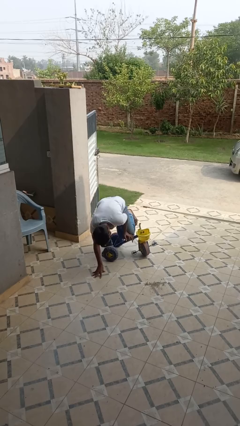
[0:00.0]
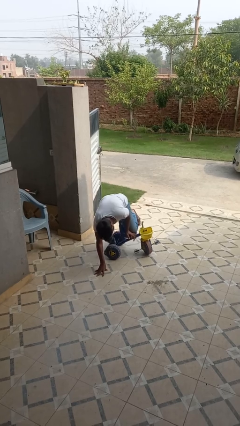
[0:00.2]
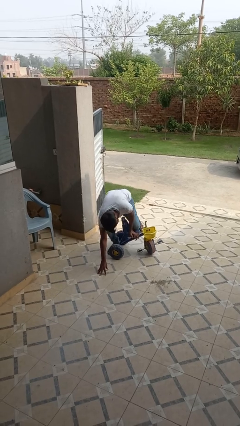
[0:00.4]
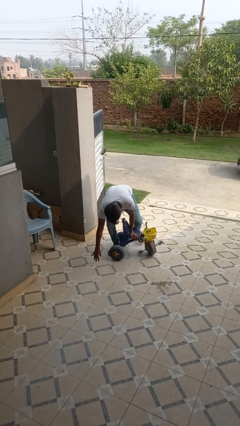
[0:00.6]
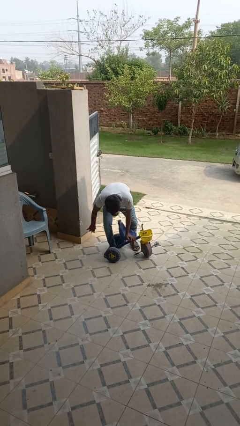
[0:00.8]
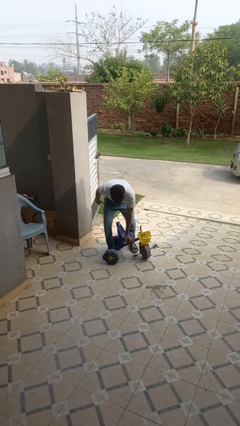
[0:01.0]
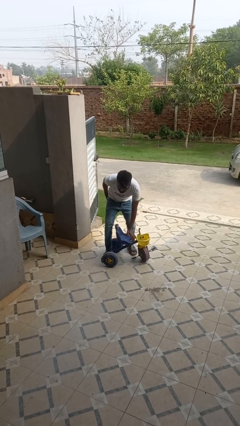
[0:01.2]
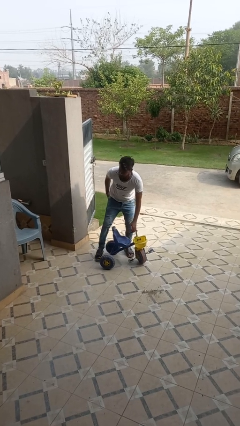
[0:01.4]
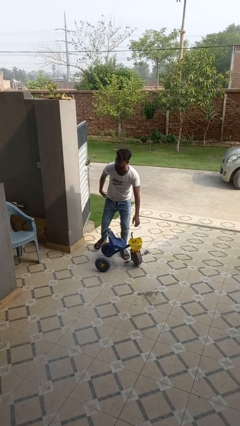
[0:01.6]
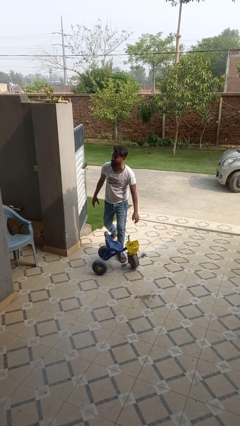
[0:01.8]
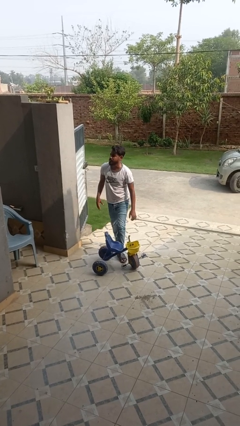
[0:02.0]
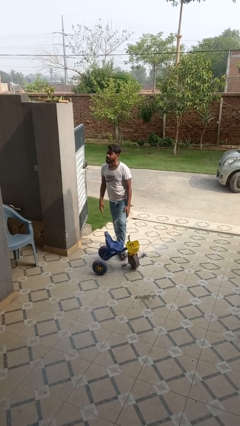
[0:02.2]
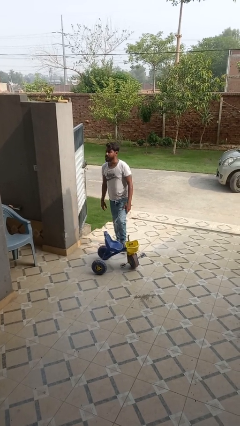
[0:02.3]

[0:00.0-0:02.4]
person stands up from floor

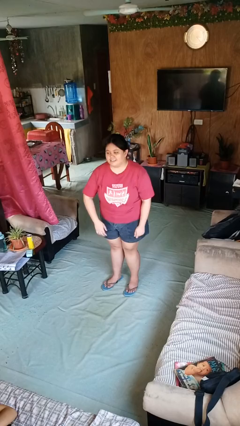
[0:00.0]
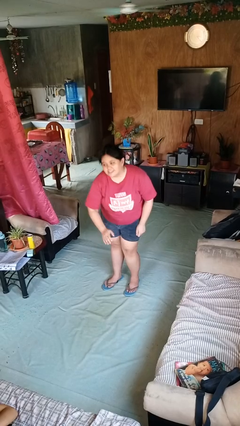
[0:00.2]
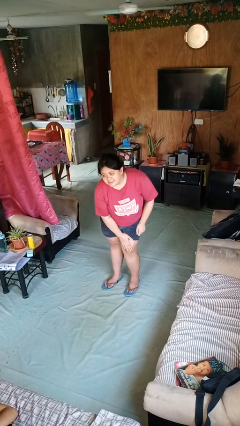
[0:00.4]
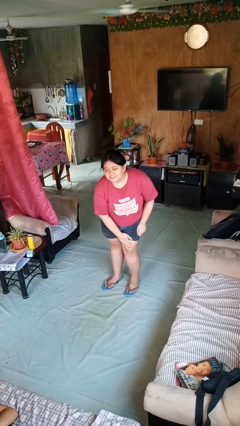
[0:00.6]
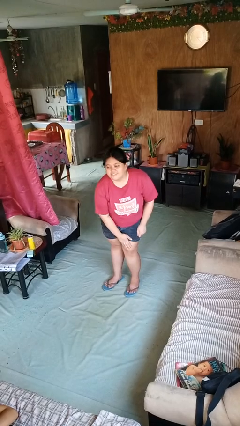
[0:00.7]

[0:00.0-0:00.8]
person swats bug

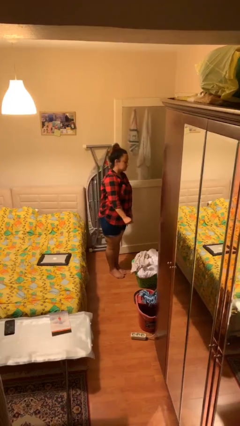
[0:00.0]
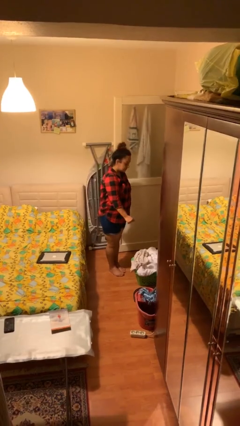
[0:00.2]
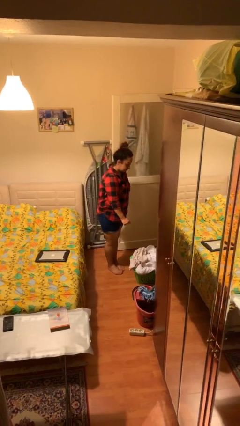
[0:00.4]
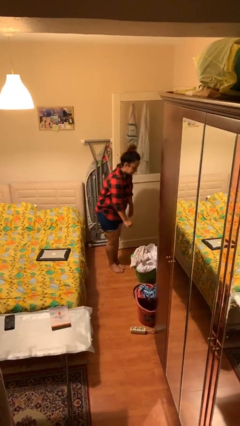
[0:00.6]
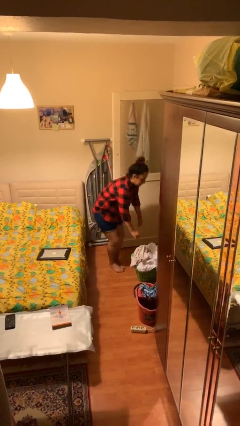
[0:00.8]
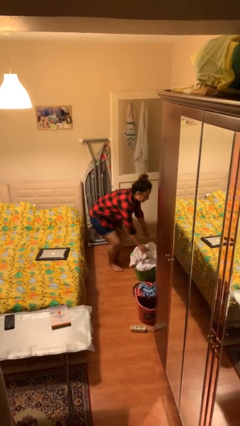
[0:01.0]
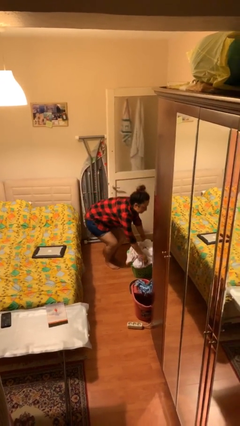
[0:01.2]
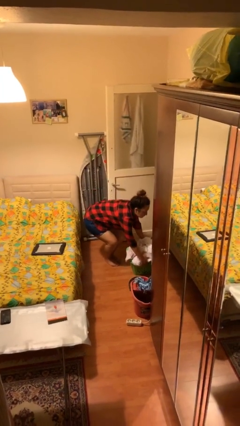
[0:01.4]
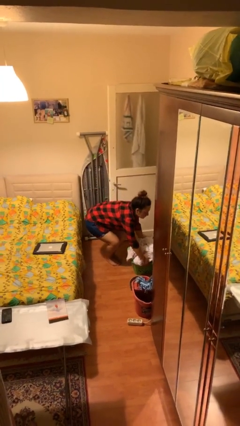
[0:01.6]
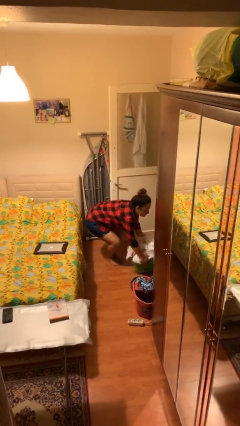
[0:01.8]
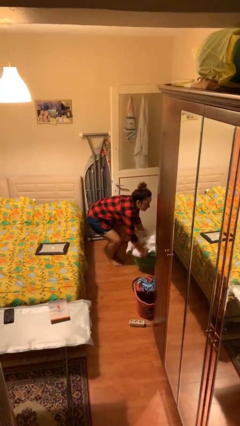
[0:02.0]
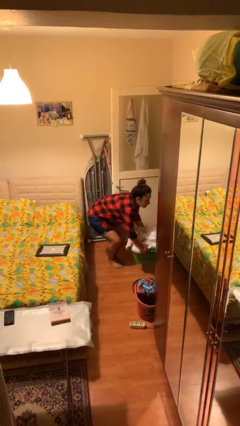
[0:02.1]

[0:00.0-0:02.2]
person picks up object from floor

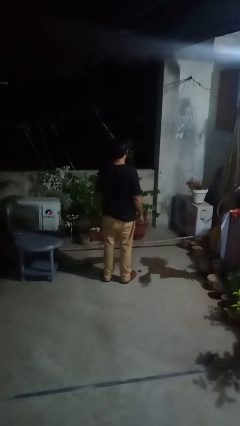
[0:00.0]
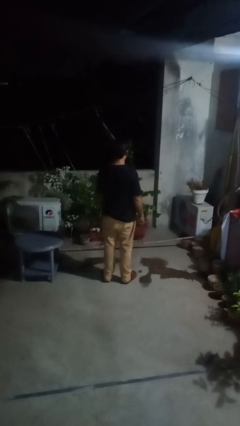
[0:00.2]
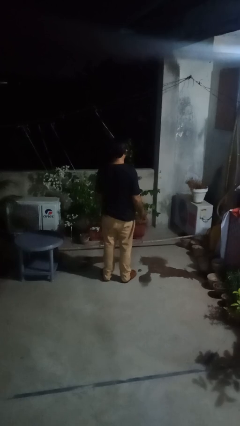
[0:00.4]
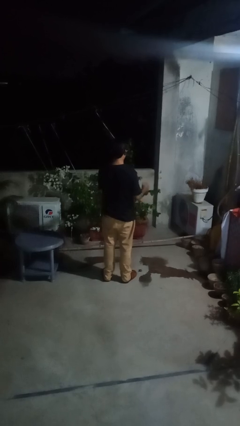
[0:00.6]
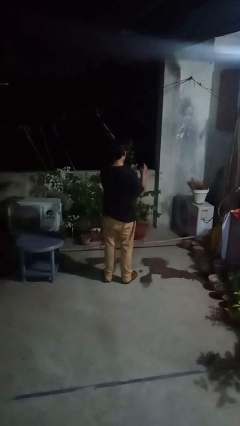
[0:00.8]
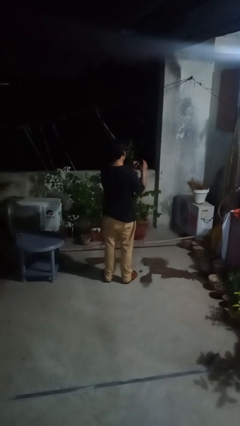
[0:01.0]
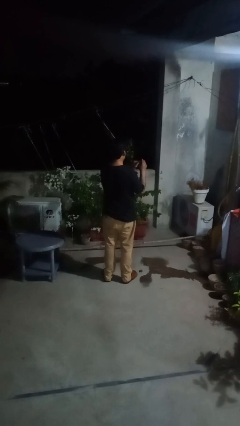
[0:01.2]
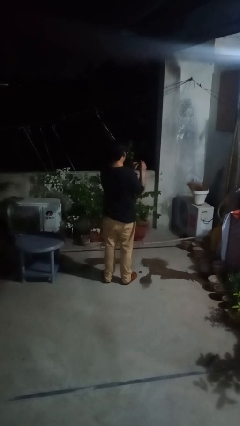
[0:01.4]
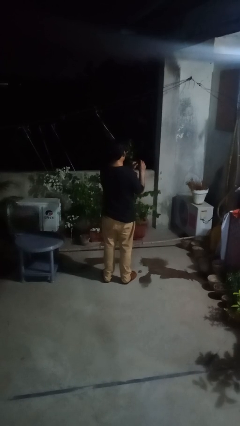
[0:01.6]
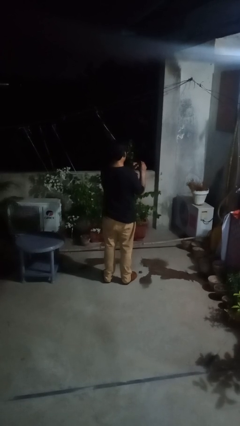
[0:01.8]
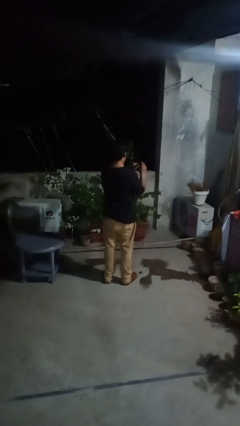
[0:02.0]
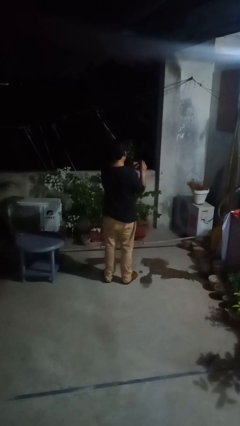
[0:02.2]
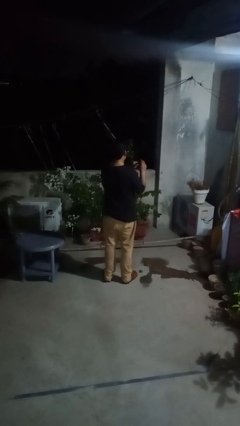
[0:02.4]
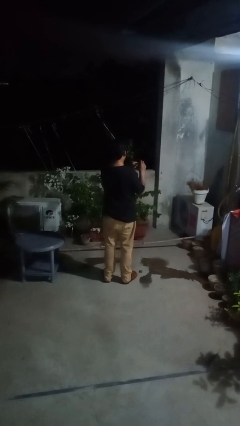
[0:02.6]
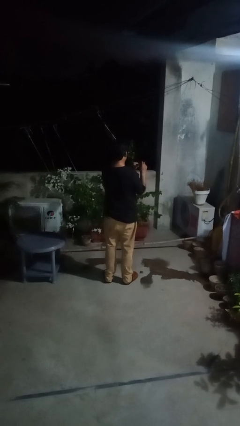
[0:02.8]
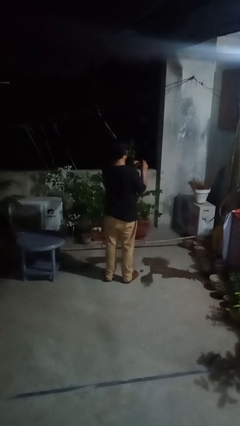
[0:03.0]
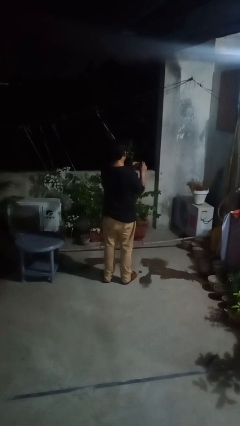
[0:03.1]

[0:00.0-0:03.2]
person clips fingernails

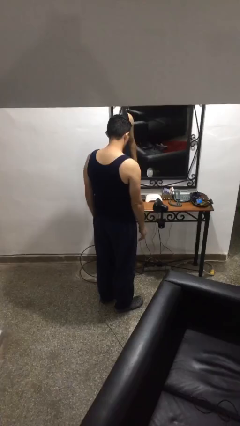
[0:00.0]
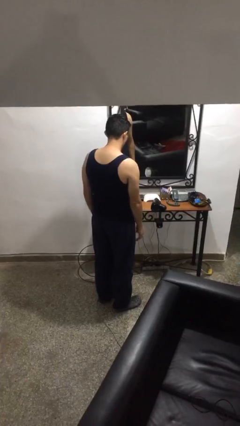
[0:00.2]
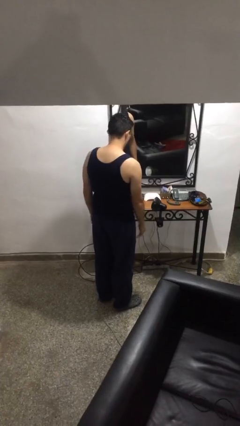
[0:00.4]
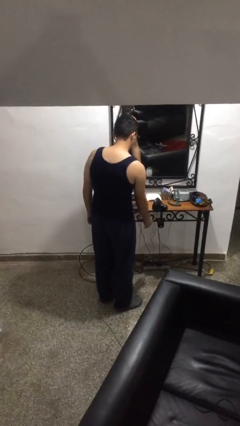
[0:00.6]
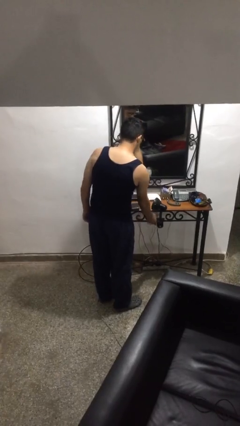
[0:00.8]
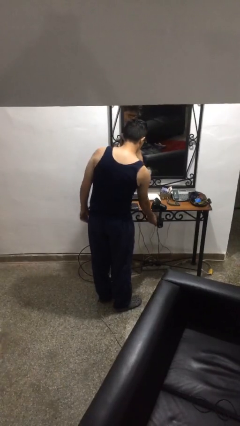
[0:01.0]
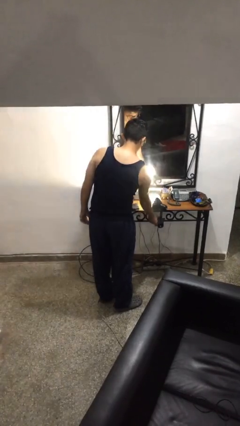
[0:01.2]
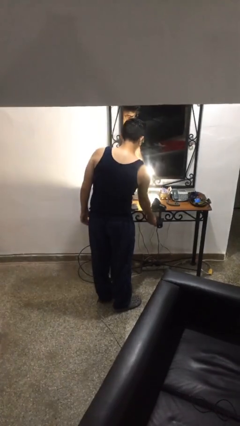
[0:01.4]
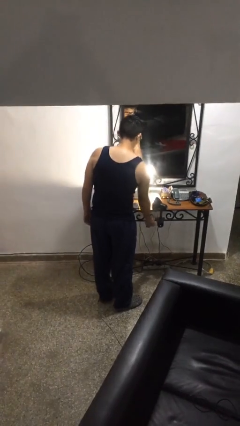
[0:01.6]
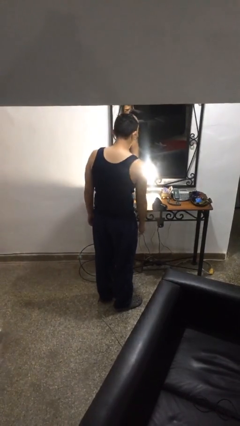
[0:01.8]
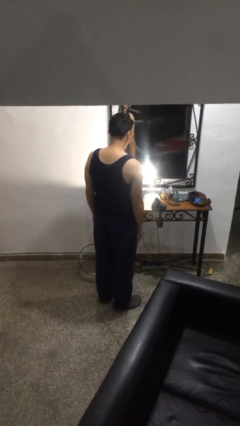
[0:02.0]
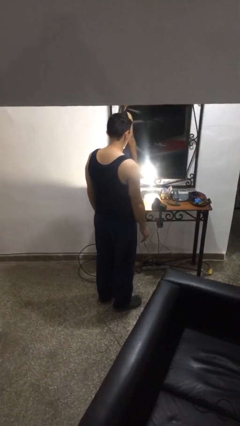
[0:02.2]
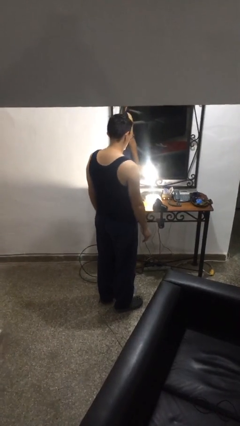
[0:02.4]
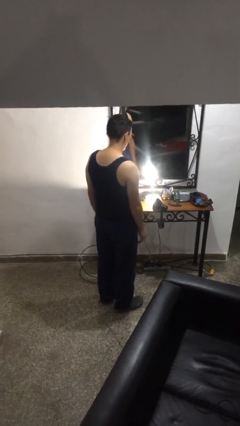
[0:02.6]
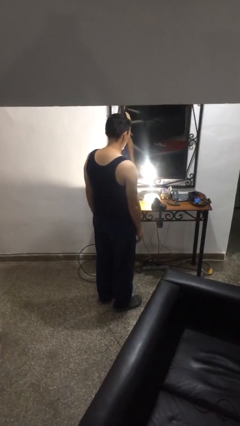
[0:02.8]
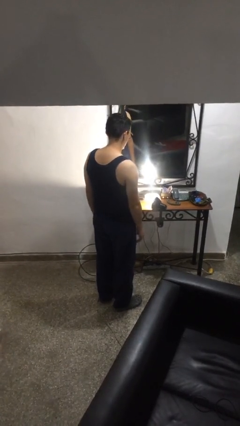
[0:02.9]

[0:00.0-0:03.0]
person turns on lamp

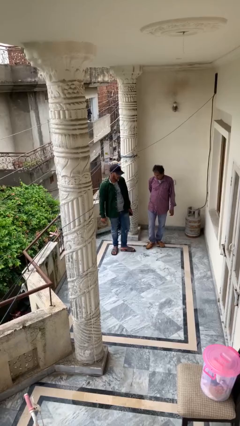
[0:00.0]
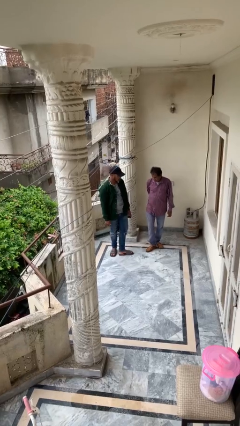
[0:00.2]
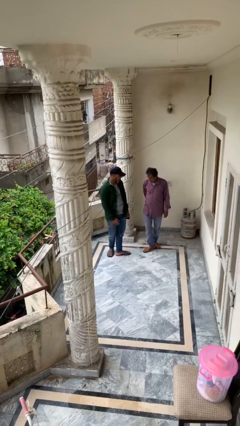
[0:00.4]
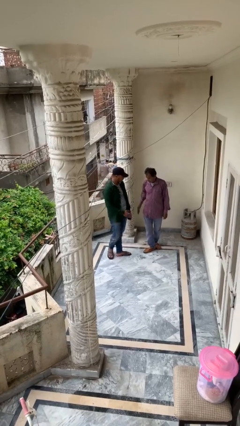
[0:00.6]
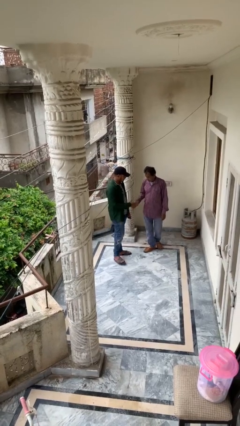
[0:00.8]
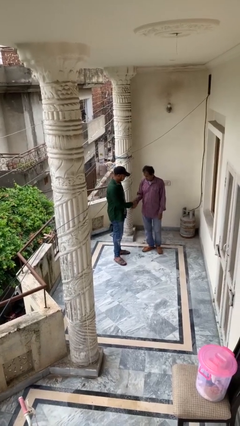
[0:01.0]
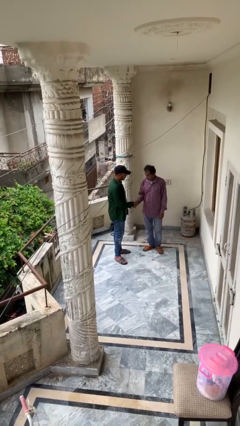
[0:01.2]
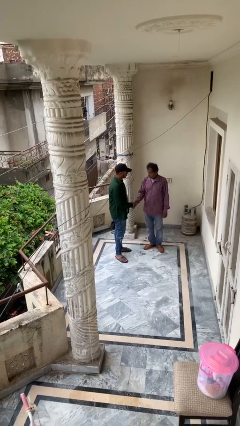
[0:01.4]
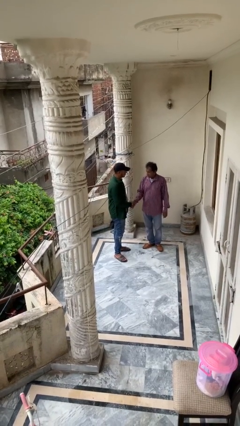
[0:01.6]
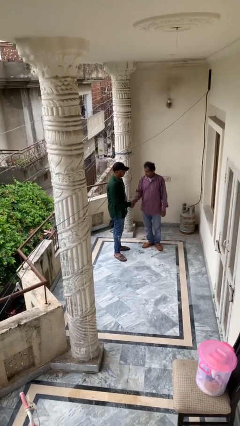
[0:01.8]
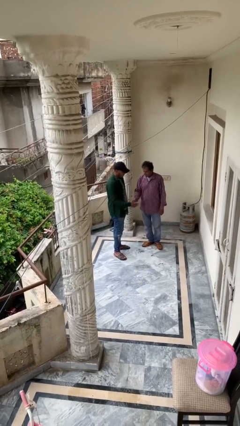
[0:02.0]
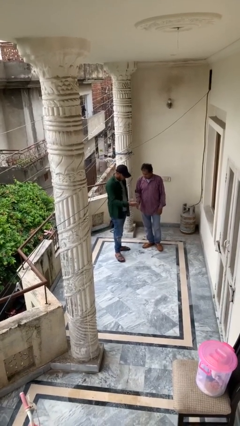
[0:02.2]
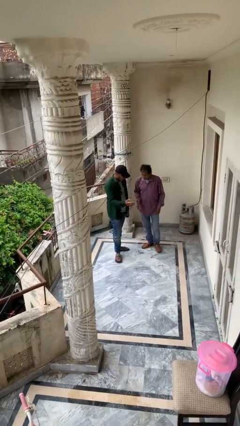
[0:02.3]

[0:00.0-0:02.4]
person shakes hand

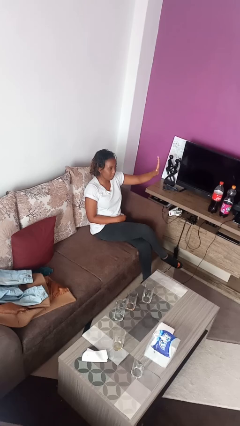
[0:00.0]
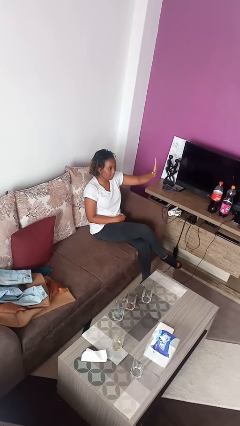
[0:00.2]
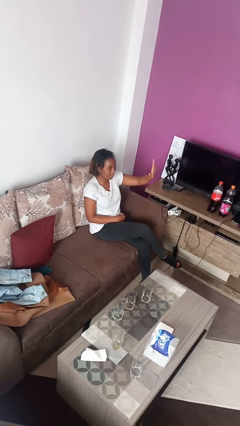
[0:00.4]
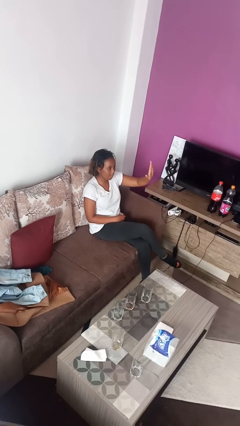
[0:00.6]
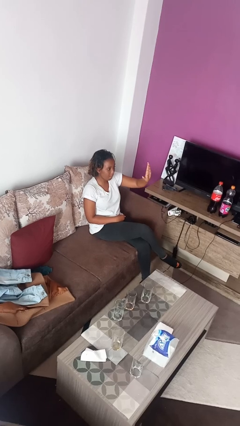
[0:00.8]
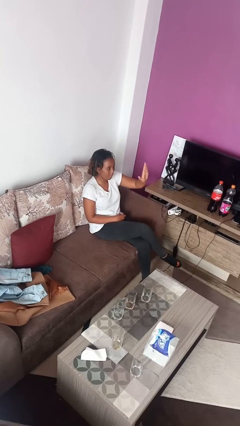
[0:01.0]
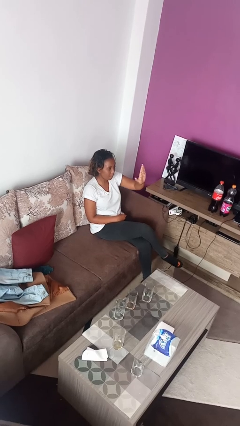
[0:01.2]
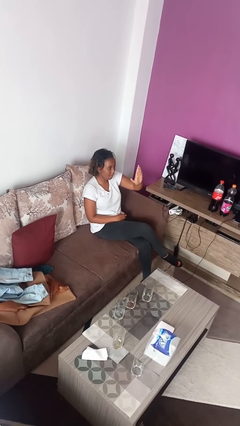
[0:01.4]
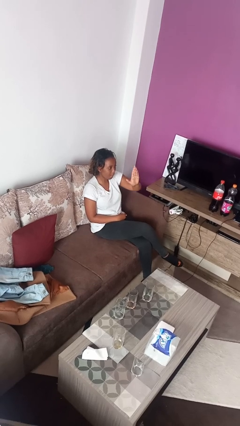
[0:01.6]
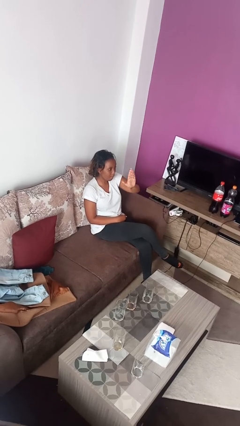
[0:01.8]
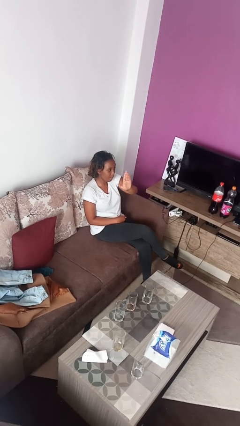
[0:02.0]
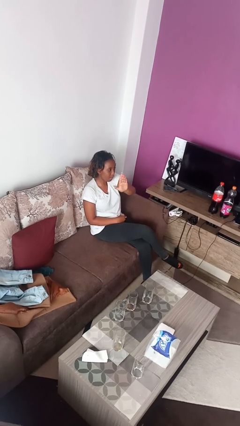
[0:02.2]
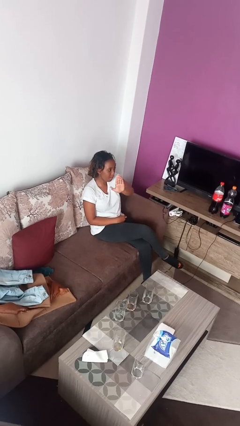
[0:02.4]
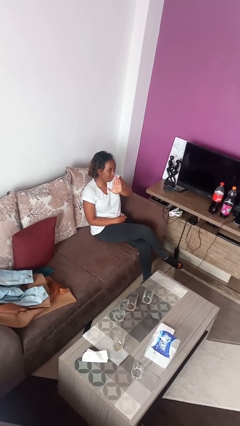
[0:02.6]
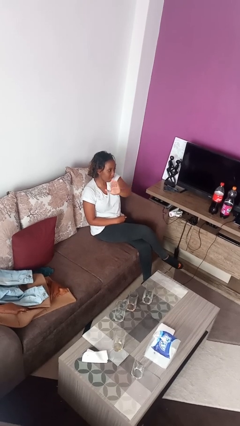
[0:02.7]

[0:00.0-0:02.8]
person gestures swipe right

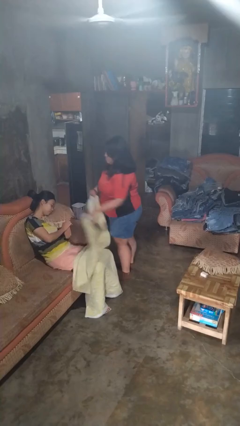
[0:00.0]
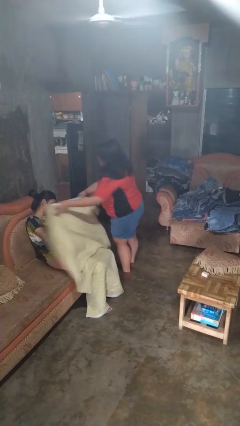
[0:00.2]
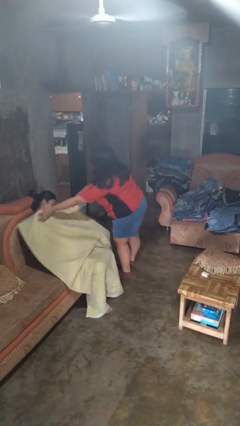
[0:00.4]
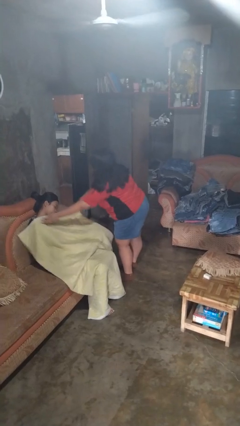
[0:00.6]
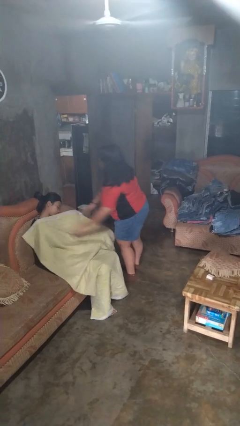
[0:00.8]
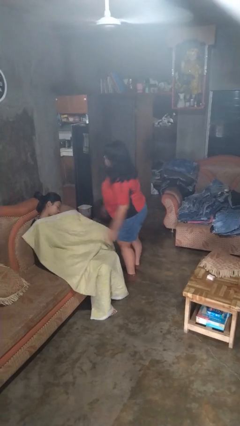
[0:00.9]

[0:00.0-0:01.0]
person covers friend with blanket
